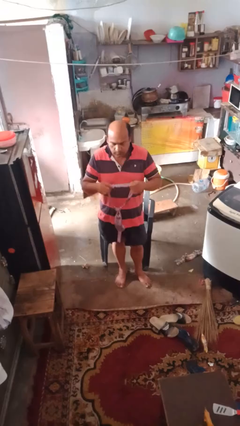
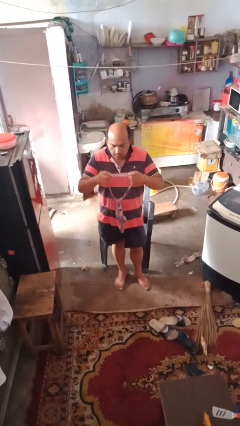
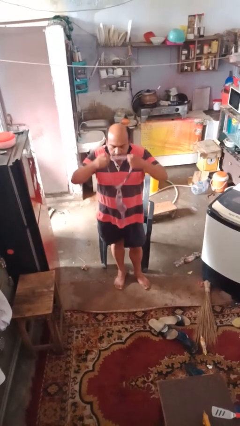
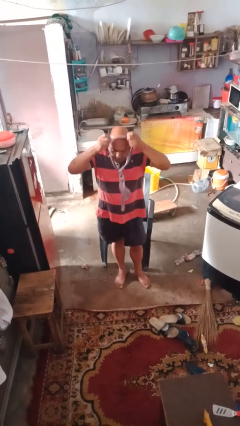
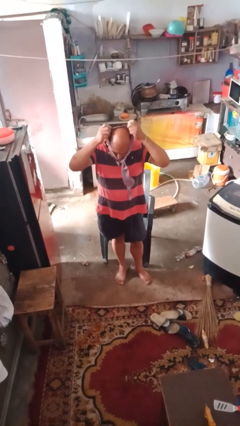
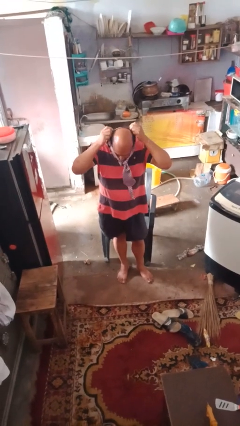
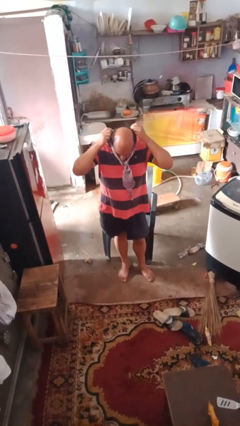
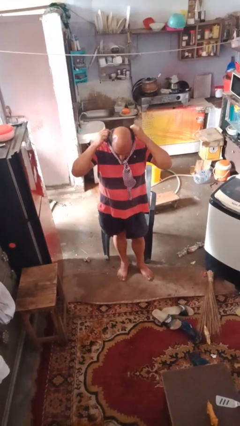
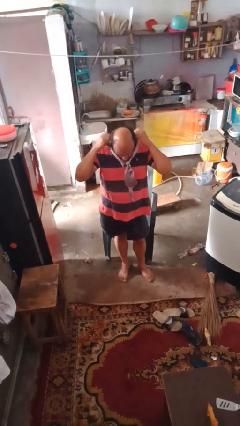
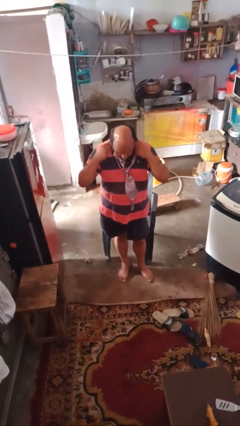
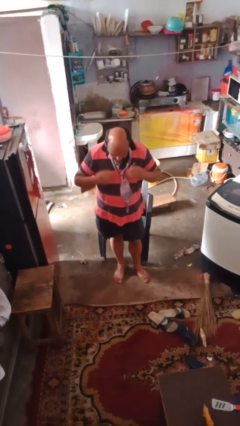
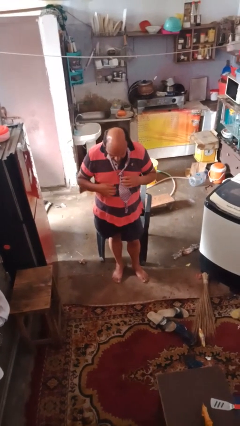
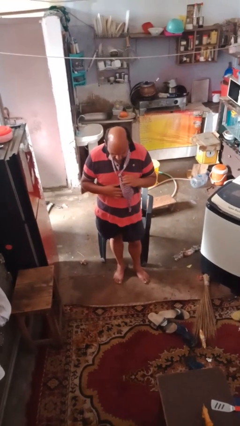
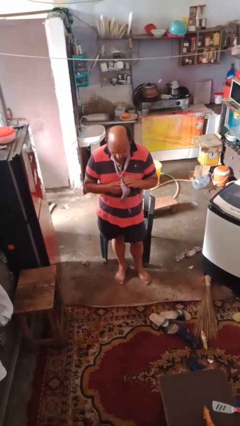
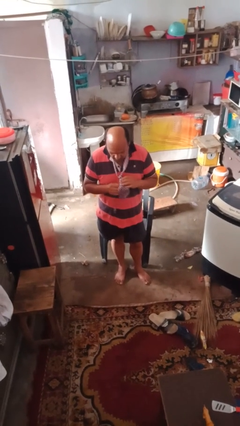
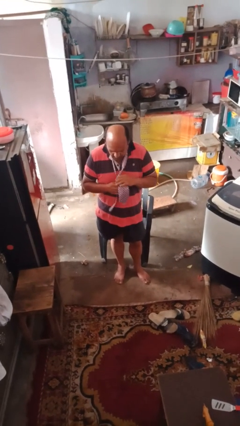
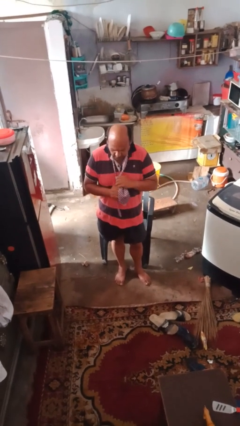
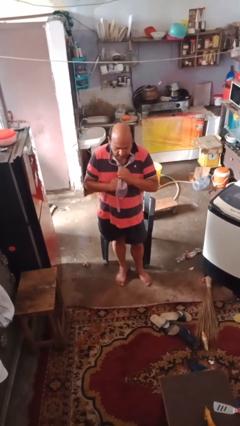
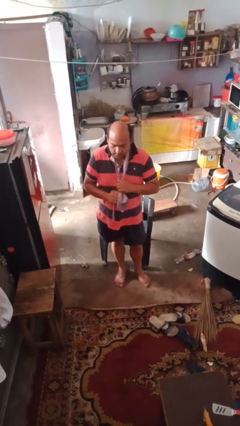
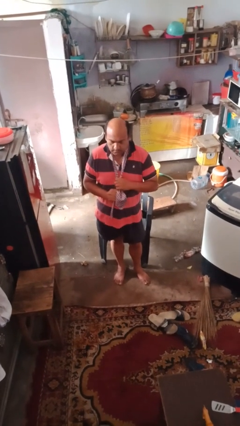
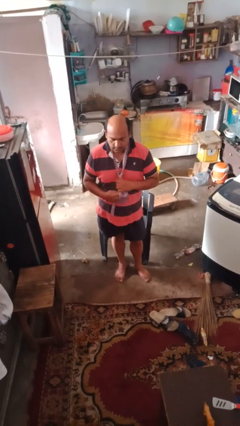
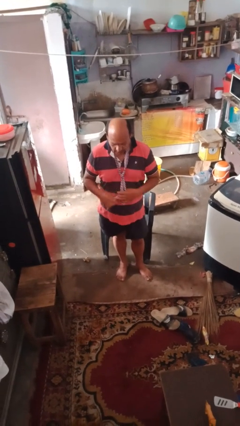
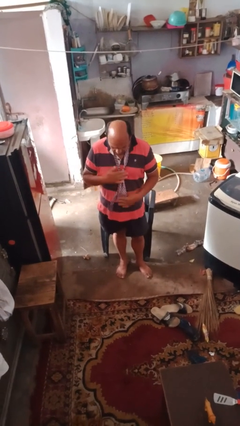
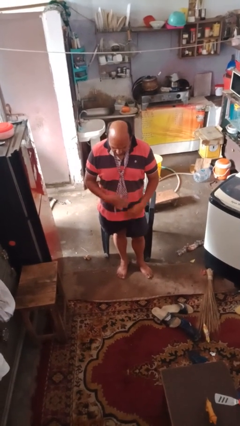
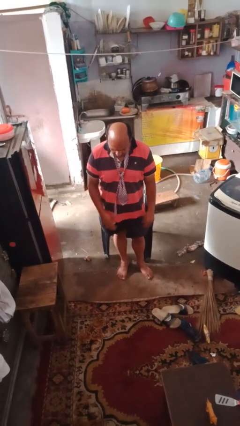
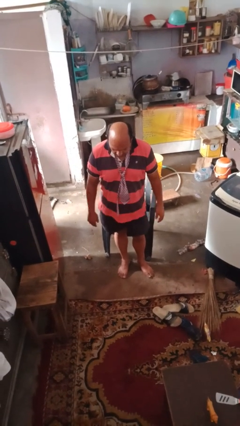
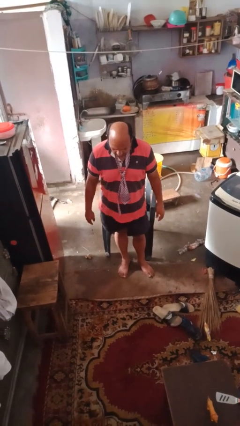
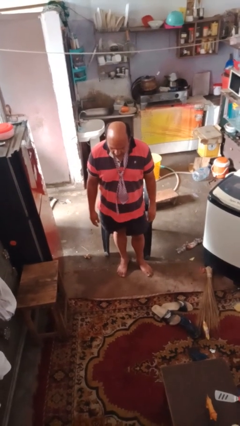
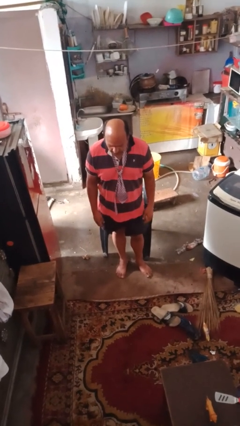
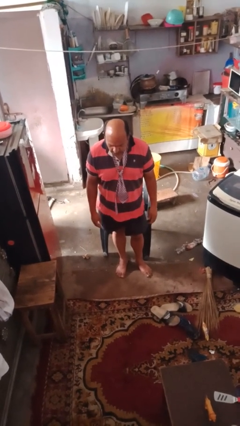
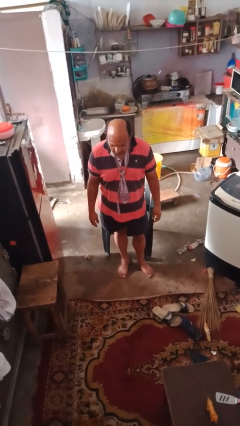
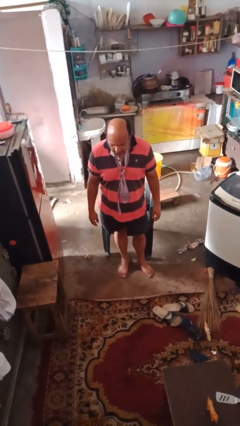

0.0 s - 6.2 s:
person puts on necktie

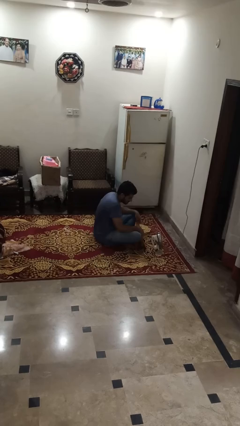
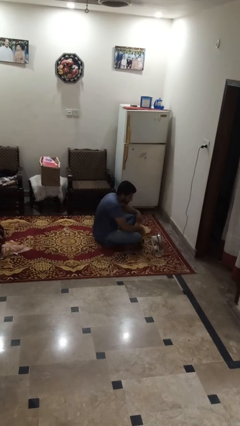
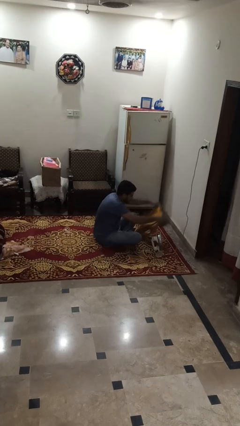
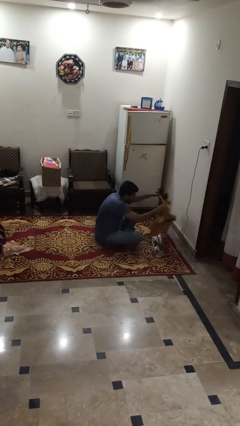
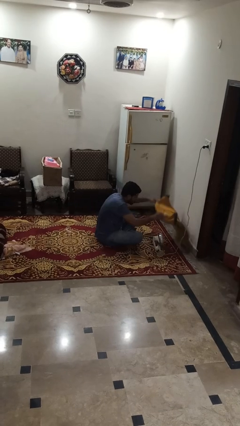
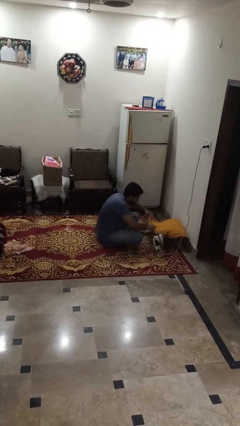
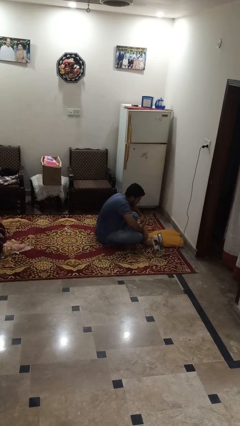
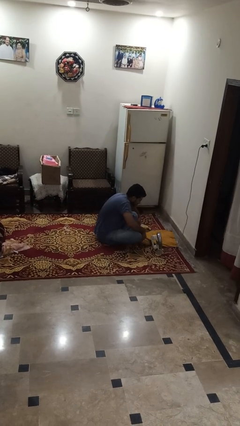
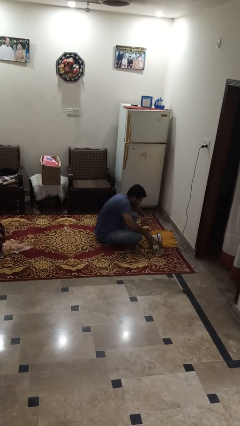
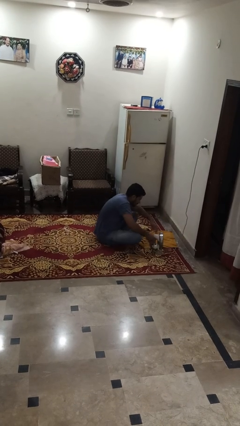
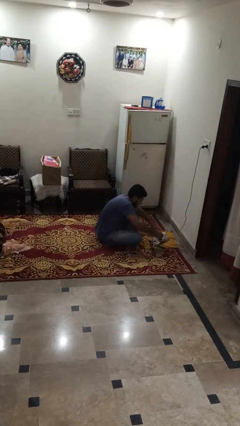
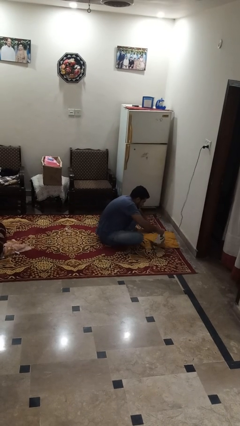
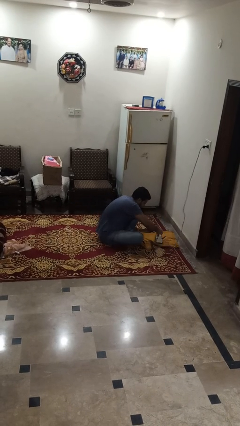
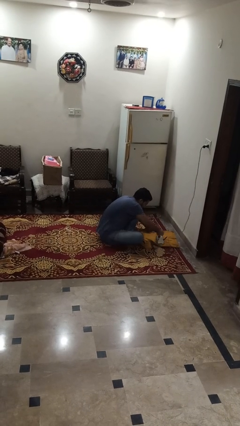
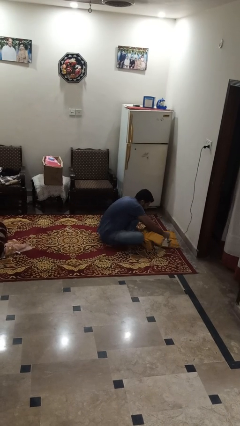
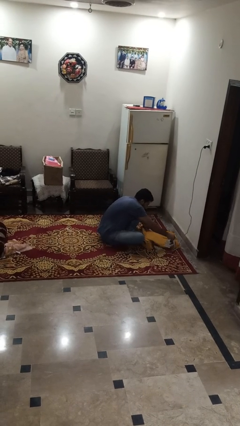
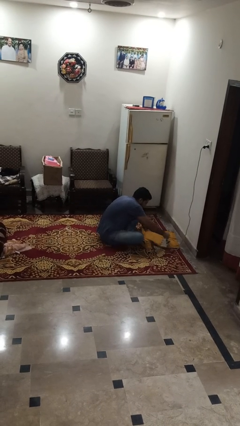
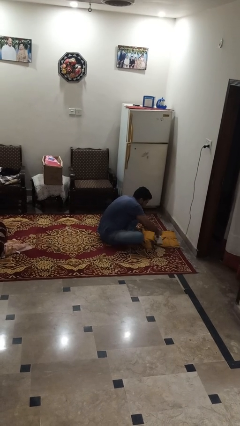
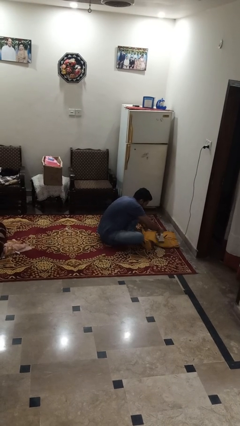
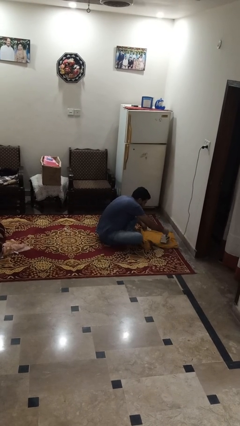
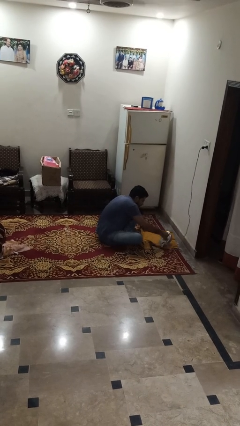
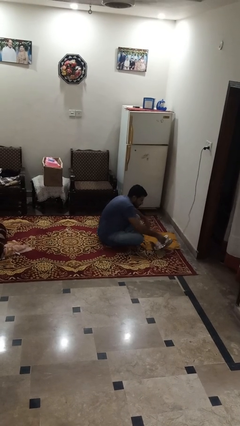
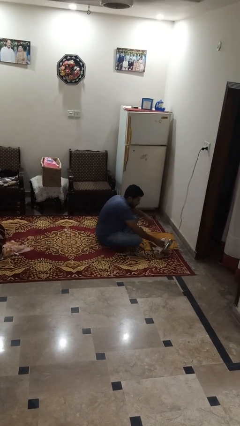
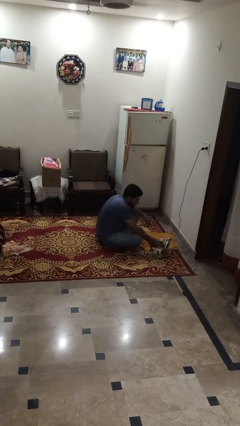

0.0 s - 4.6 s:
person irons clothes

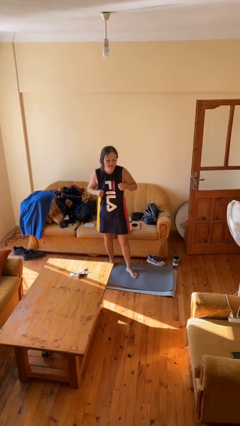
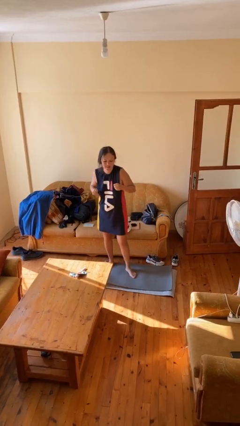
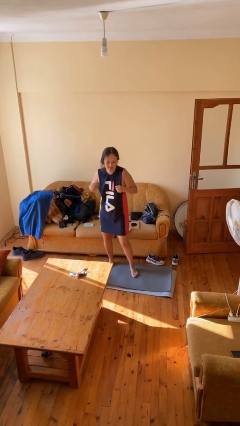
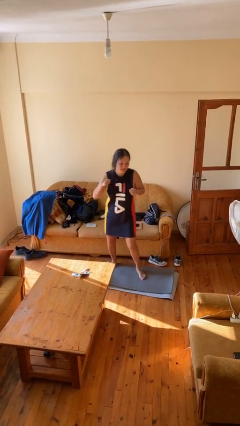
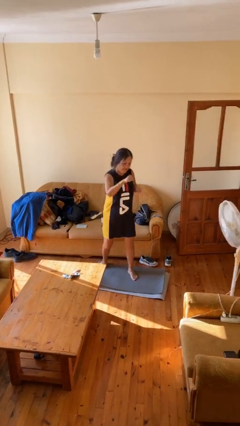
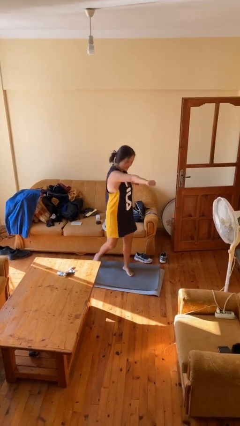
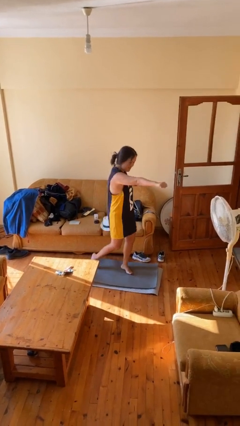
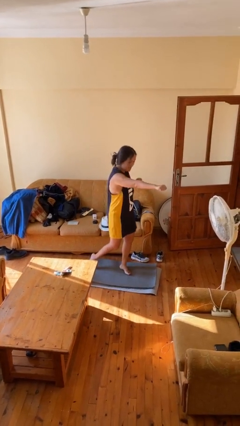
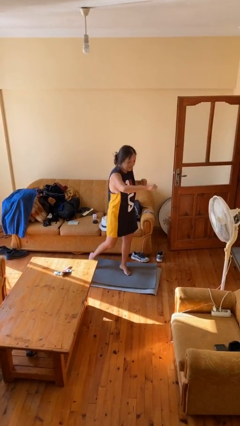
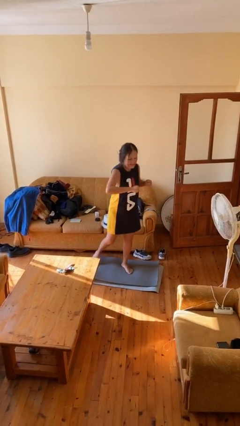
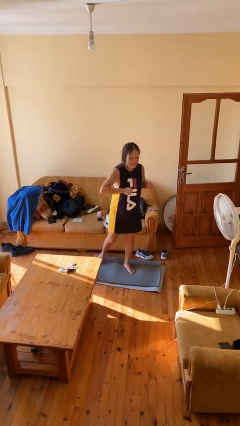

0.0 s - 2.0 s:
person punches

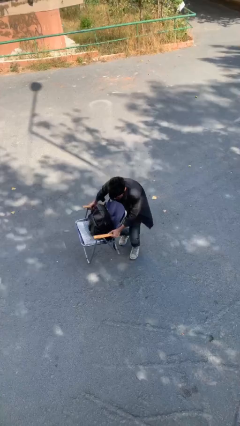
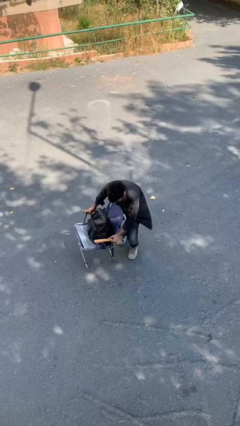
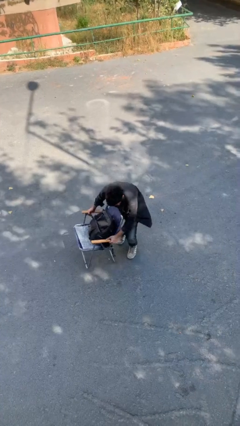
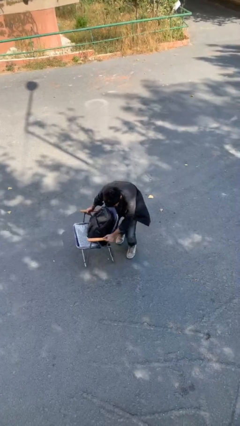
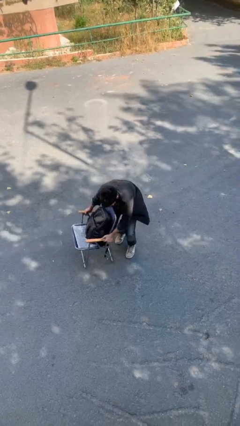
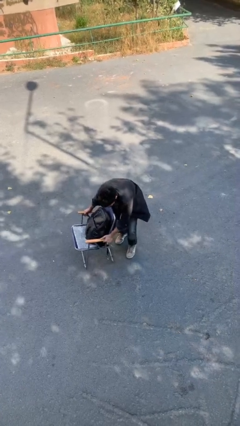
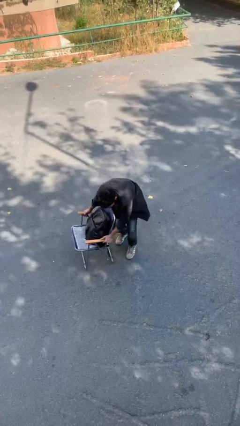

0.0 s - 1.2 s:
person puts down object on floor

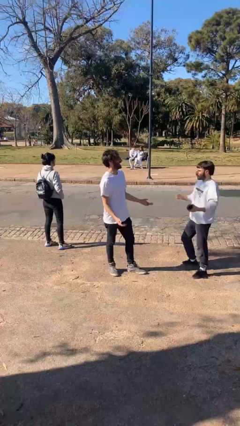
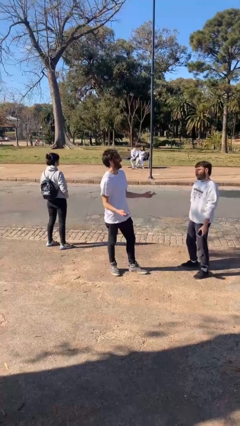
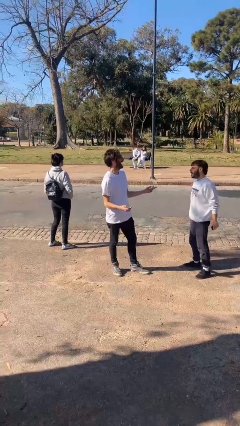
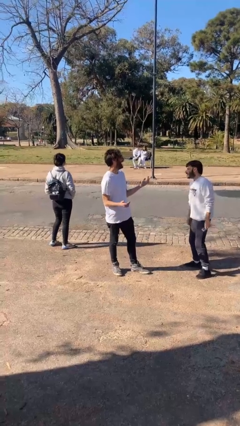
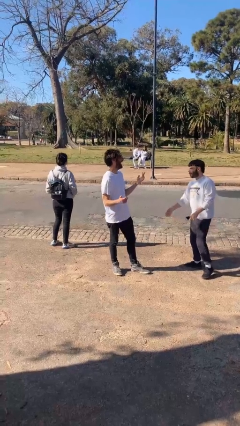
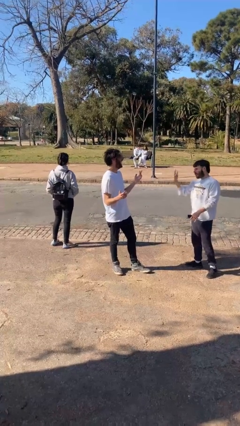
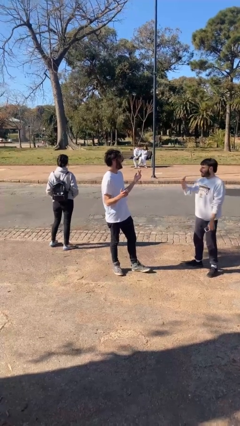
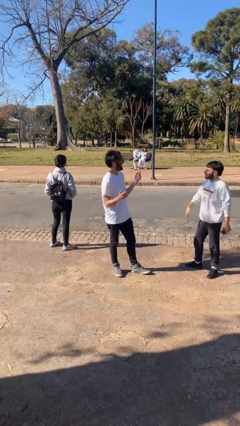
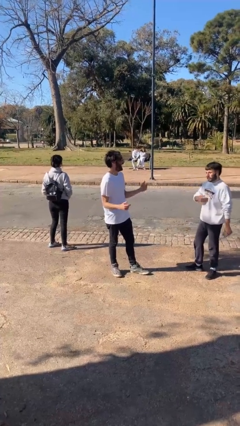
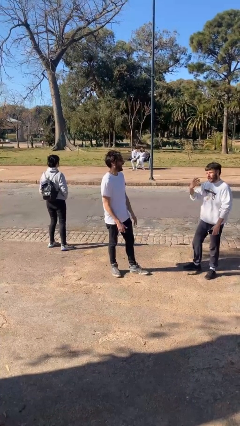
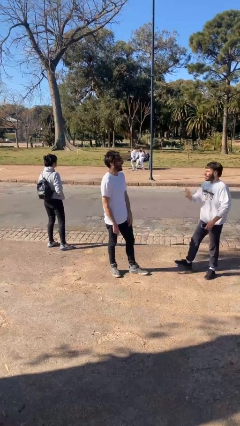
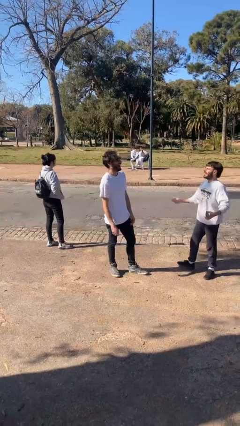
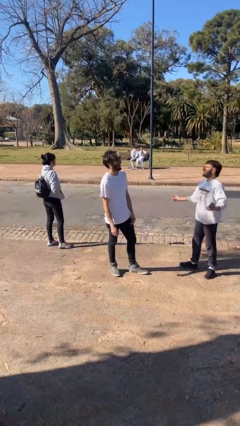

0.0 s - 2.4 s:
person laughs with person

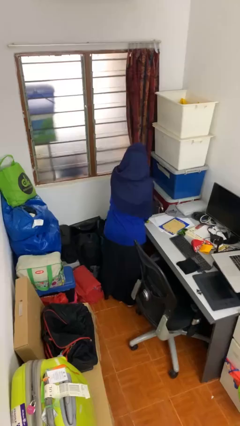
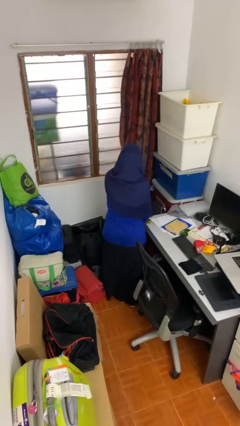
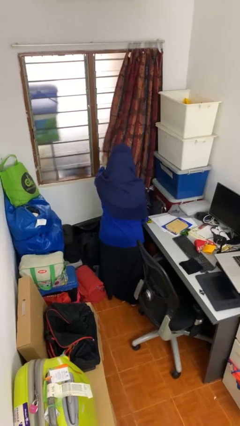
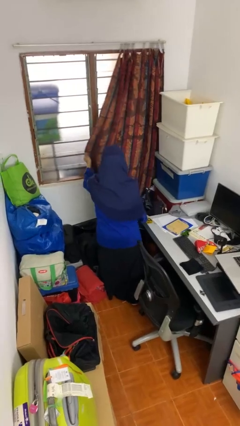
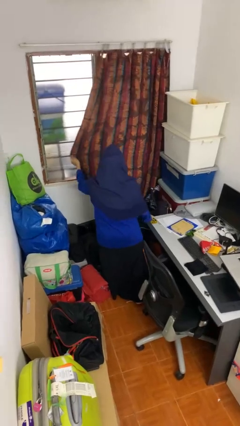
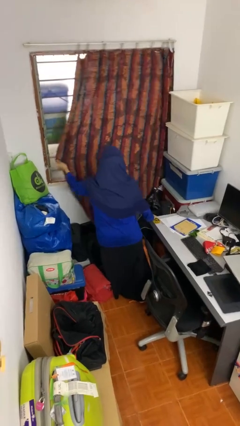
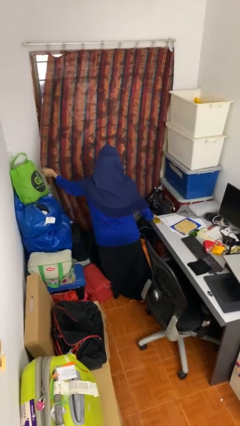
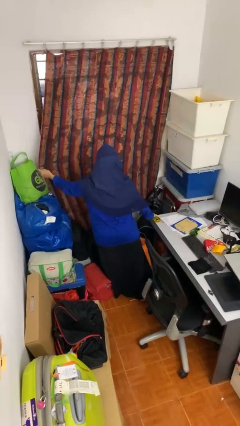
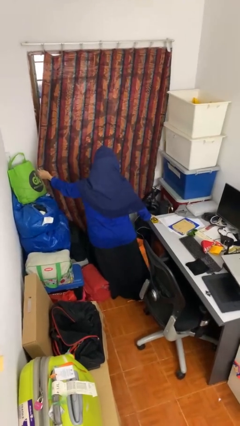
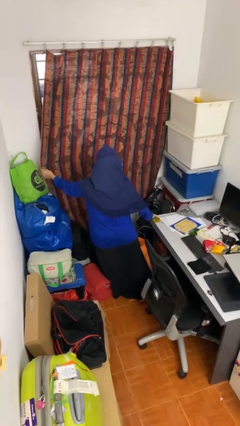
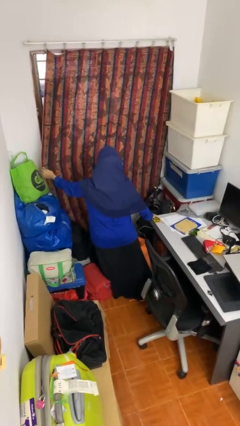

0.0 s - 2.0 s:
person closes curtains
